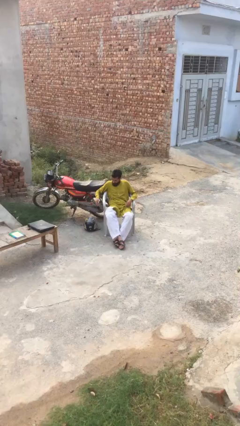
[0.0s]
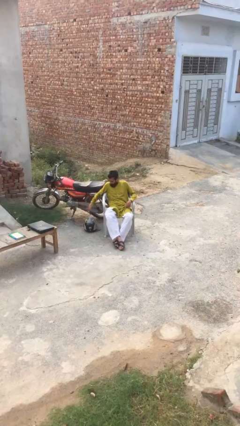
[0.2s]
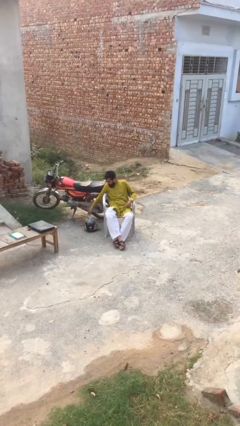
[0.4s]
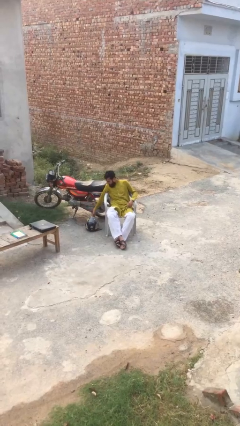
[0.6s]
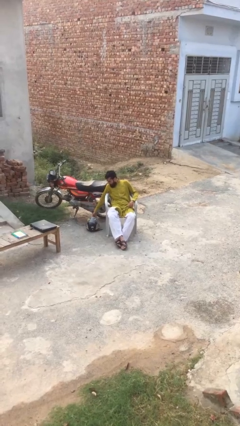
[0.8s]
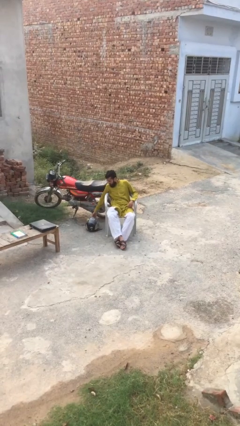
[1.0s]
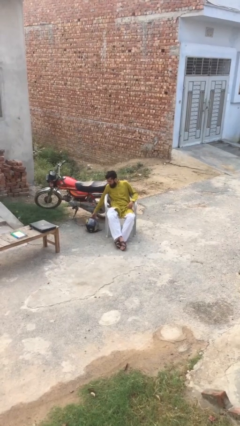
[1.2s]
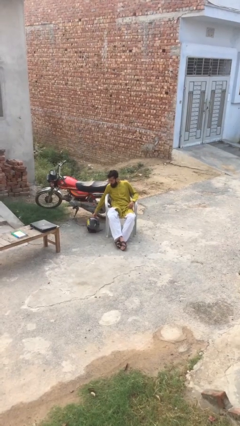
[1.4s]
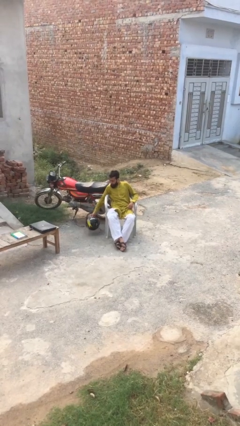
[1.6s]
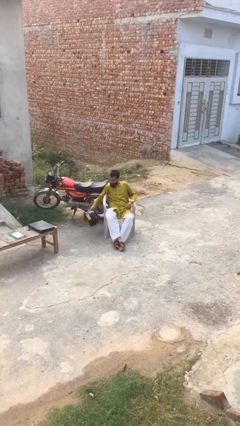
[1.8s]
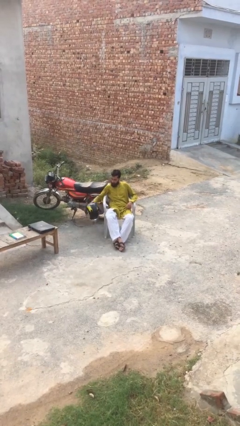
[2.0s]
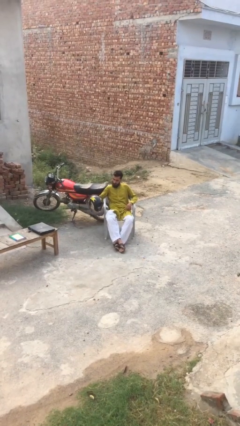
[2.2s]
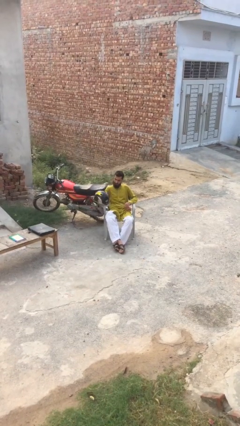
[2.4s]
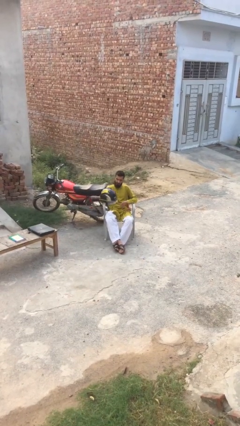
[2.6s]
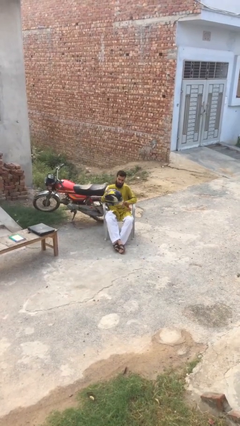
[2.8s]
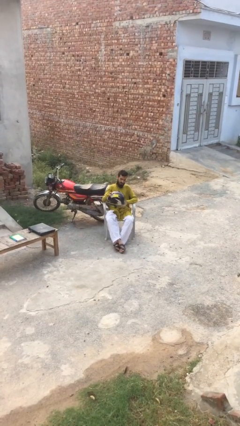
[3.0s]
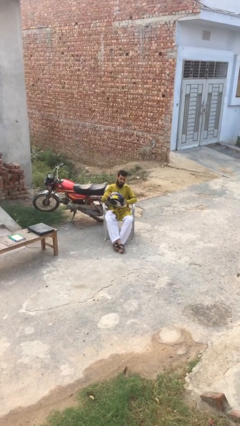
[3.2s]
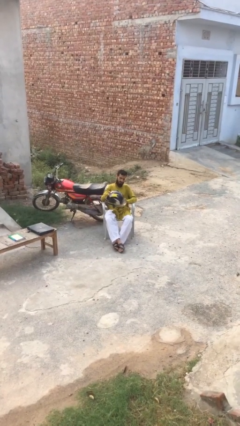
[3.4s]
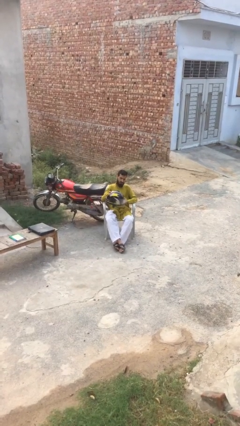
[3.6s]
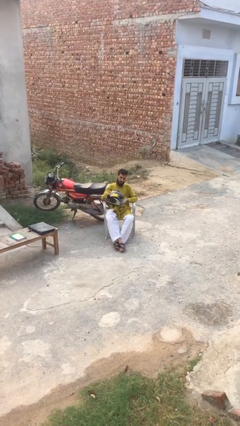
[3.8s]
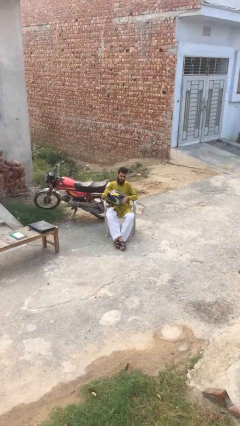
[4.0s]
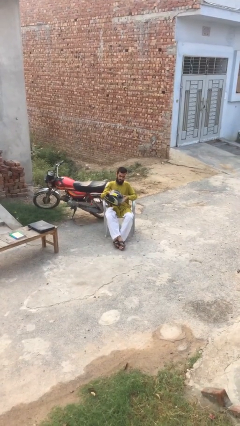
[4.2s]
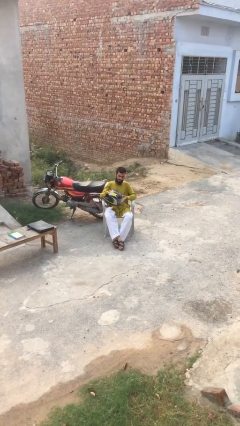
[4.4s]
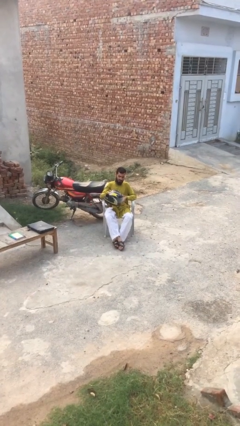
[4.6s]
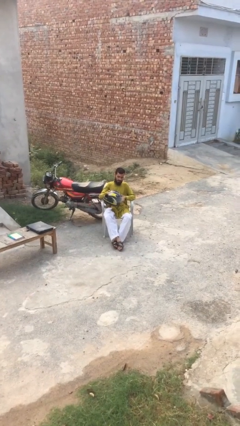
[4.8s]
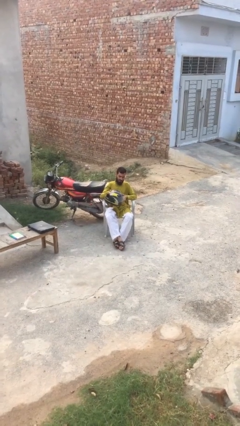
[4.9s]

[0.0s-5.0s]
person picks up object from floor

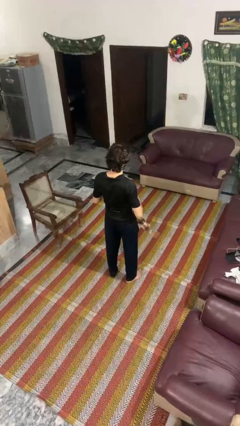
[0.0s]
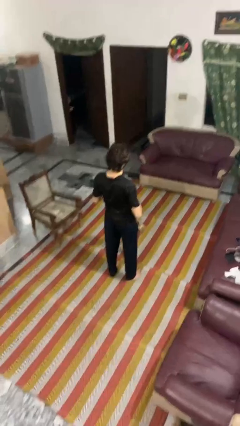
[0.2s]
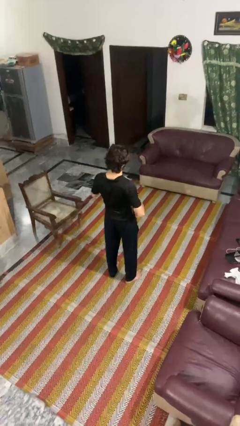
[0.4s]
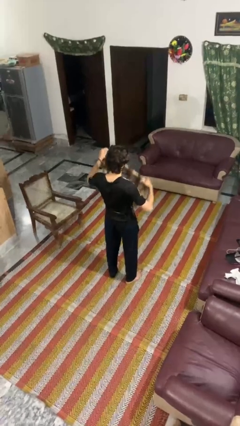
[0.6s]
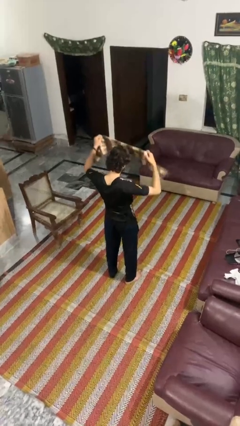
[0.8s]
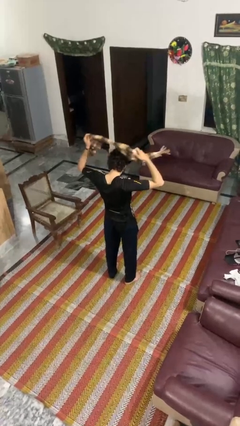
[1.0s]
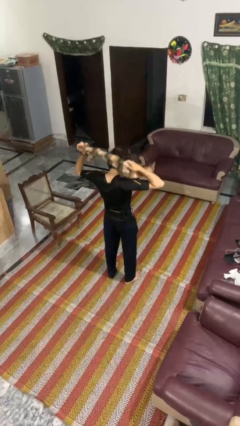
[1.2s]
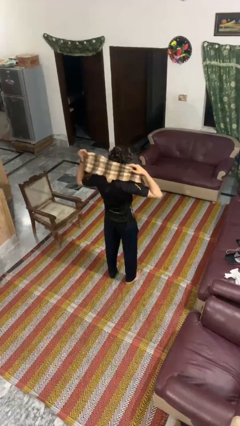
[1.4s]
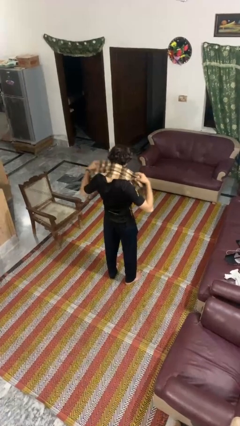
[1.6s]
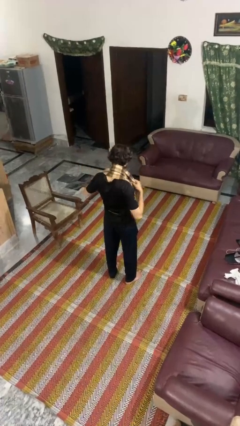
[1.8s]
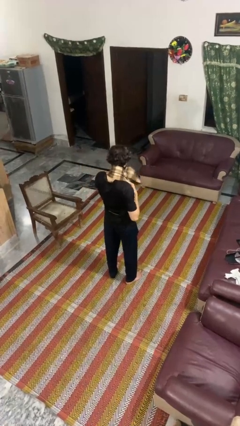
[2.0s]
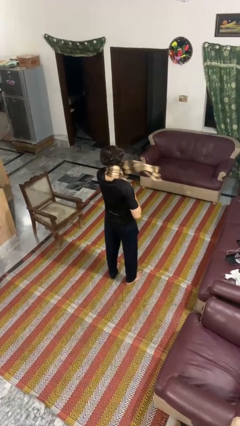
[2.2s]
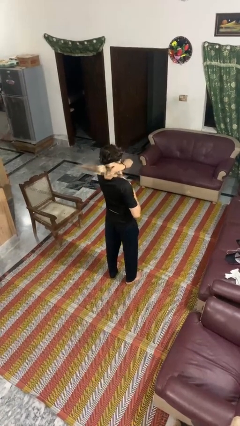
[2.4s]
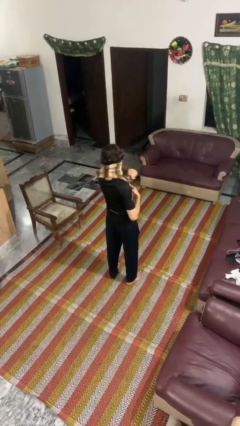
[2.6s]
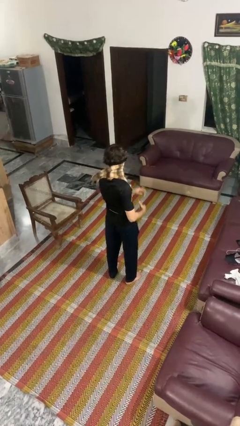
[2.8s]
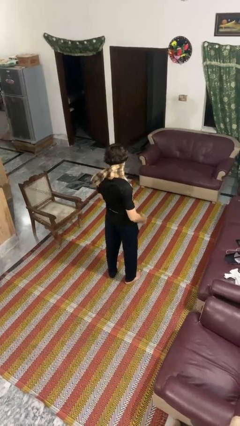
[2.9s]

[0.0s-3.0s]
person puts on scarf

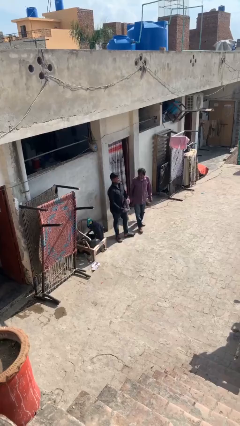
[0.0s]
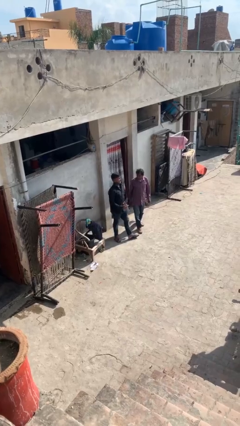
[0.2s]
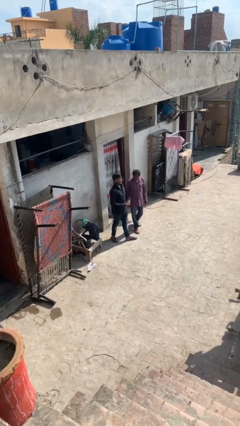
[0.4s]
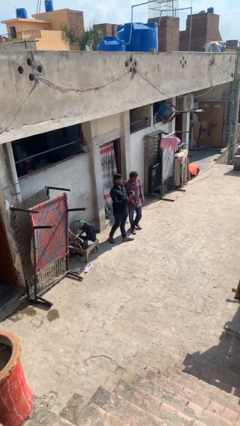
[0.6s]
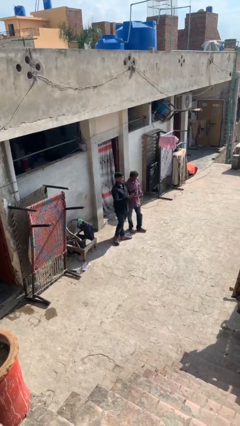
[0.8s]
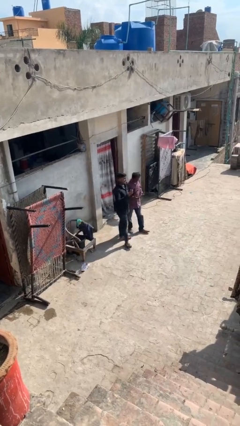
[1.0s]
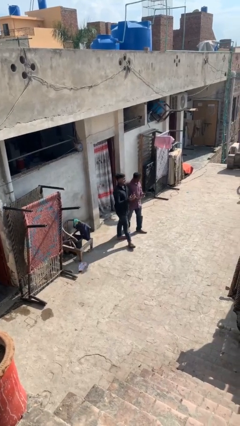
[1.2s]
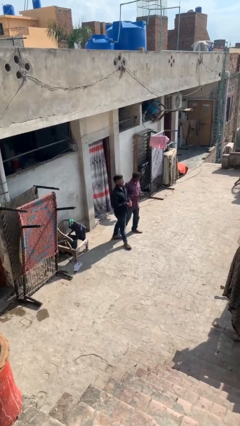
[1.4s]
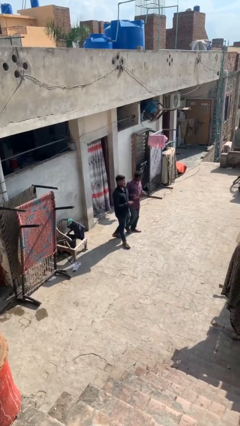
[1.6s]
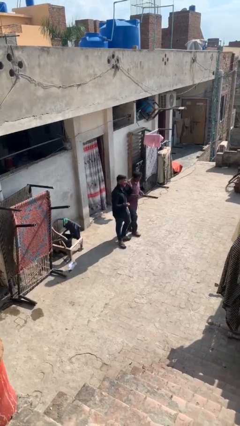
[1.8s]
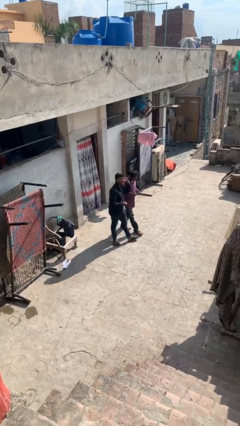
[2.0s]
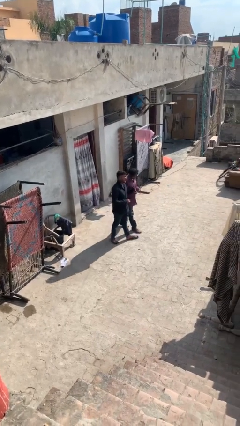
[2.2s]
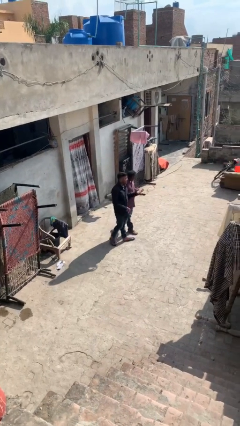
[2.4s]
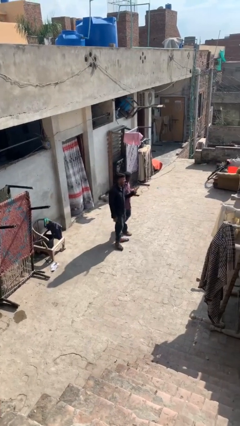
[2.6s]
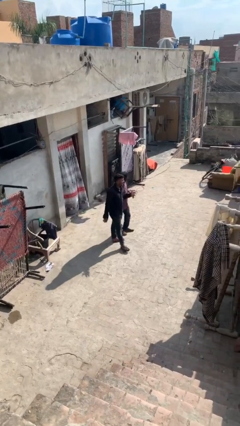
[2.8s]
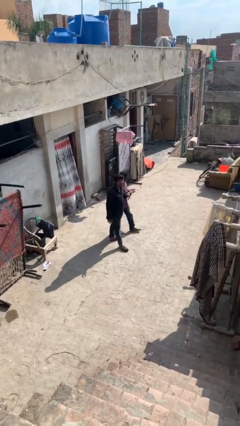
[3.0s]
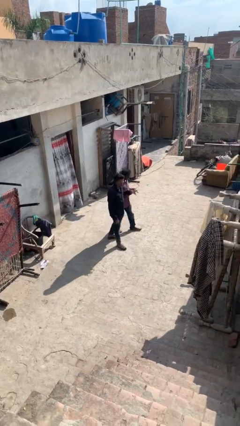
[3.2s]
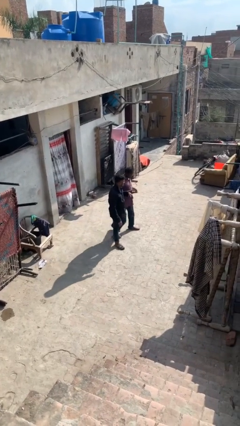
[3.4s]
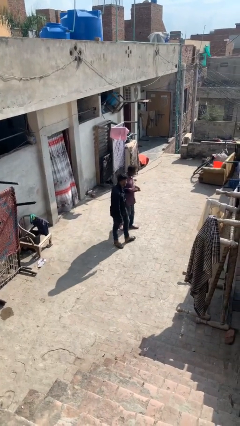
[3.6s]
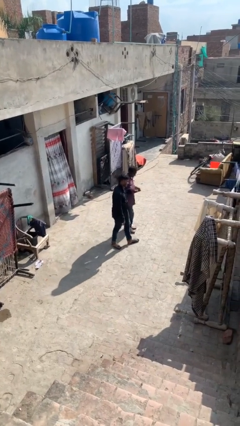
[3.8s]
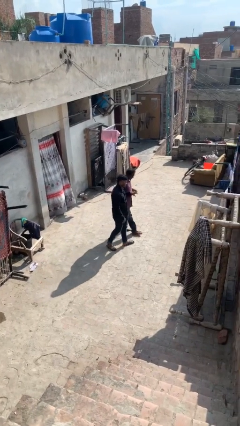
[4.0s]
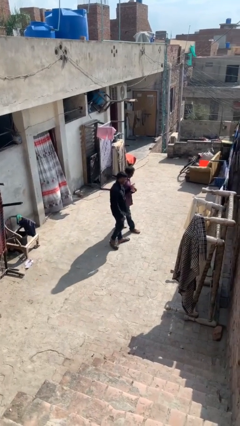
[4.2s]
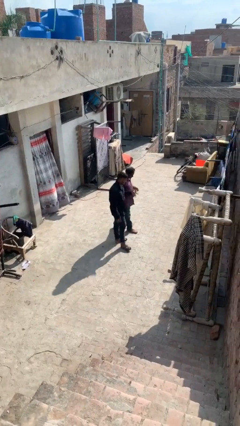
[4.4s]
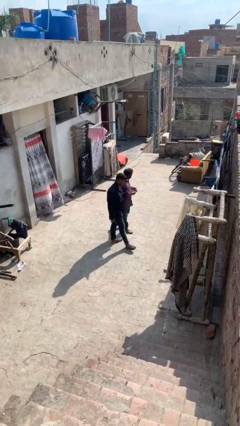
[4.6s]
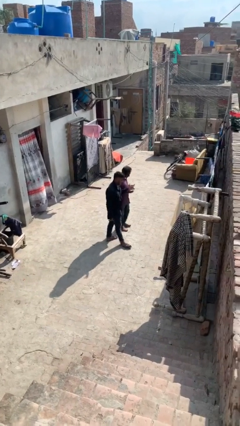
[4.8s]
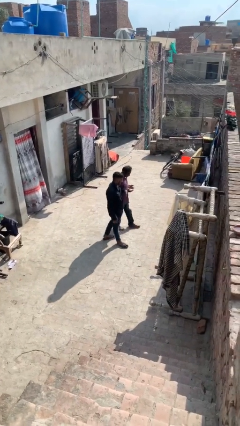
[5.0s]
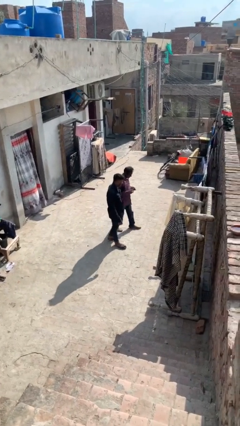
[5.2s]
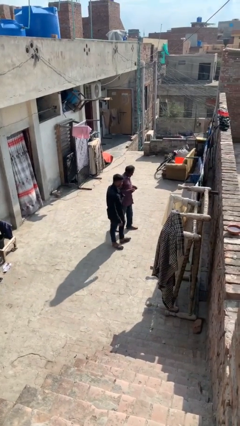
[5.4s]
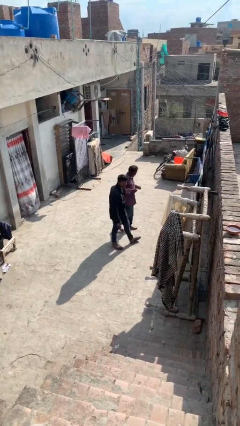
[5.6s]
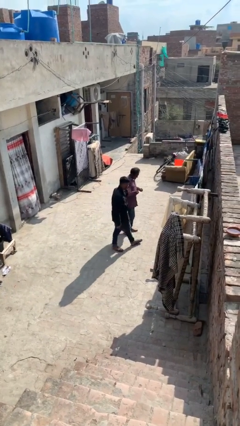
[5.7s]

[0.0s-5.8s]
person talks to person

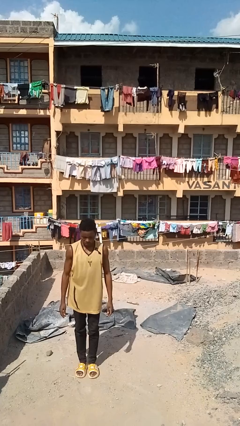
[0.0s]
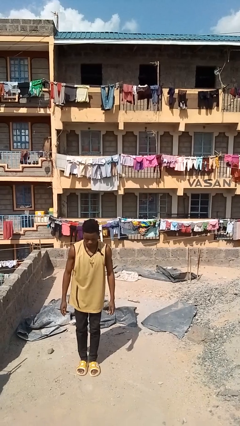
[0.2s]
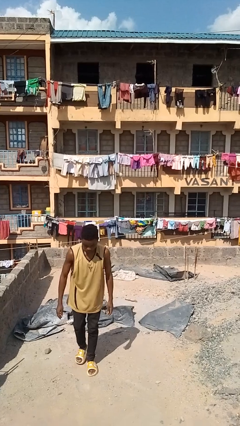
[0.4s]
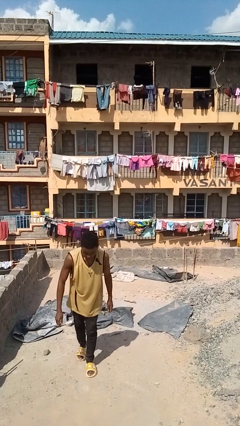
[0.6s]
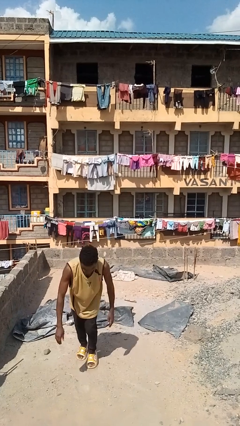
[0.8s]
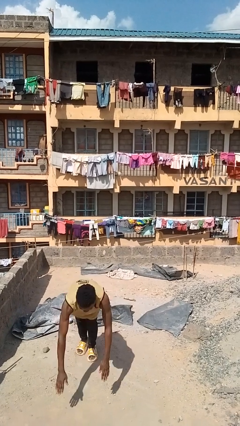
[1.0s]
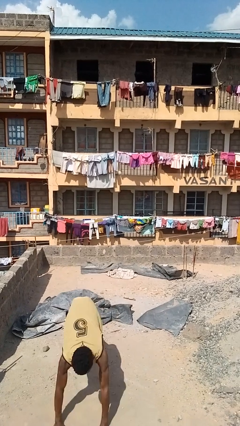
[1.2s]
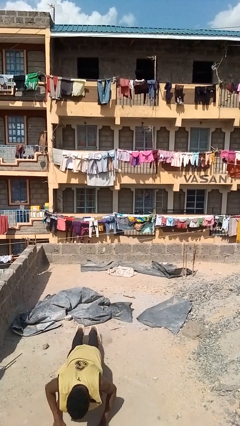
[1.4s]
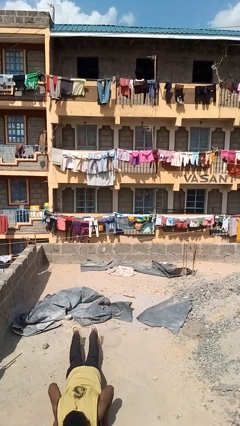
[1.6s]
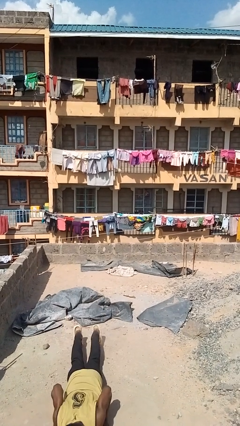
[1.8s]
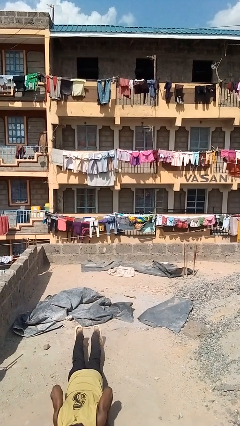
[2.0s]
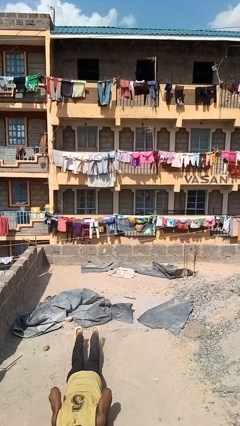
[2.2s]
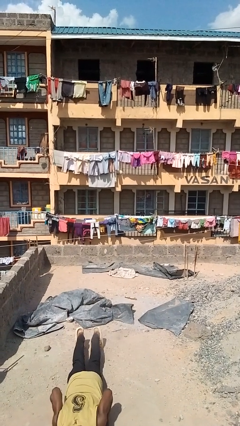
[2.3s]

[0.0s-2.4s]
person falls while standing

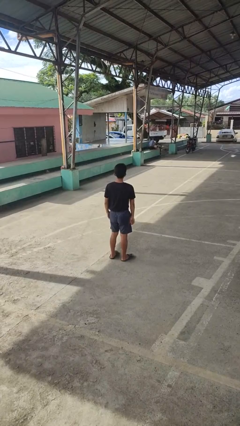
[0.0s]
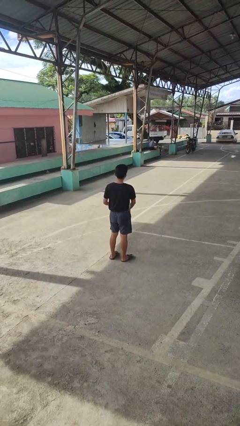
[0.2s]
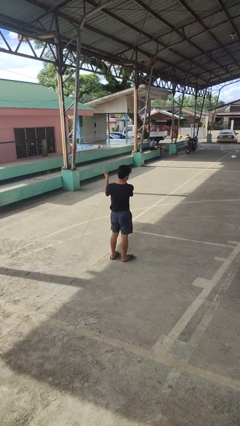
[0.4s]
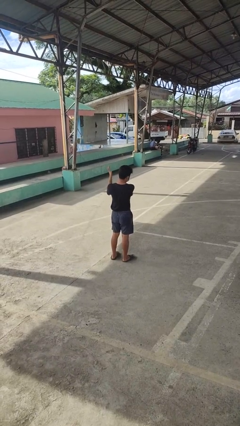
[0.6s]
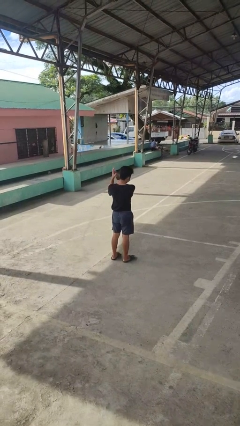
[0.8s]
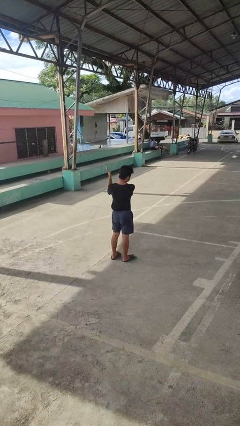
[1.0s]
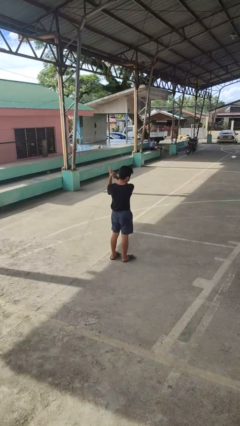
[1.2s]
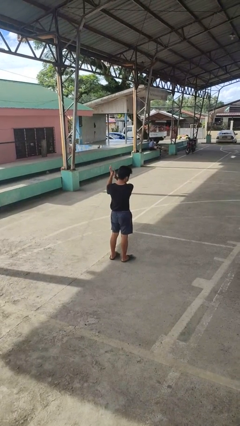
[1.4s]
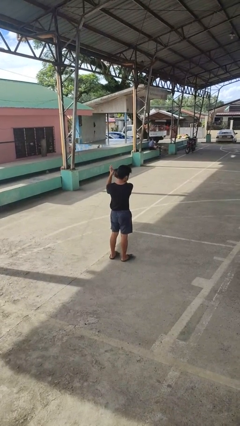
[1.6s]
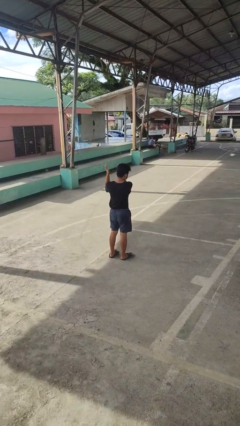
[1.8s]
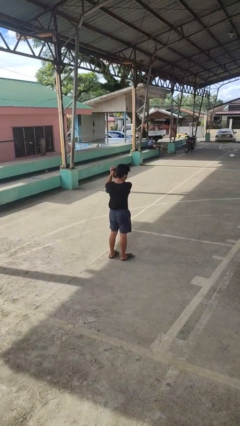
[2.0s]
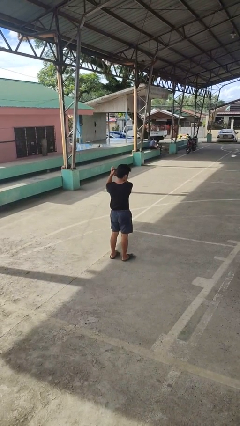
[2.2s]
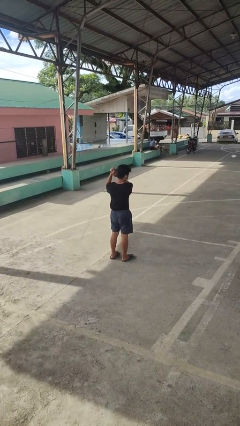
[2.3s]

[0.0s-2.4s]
person claps hands
